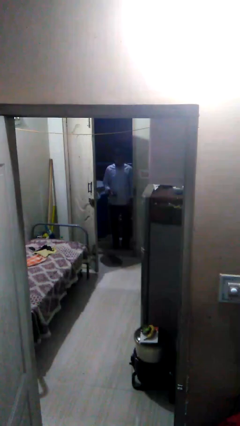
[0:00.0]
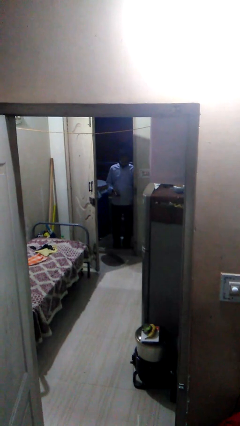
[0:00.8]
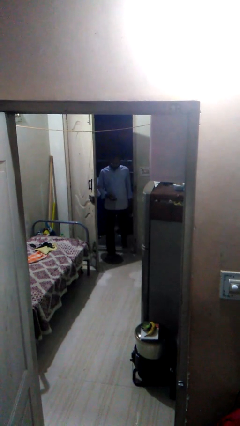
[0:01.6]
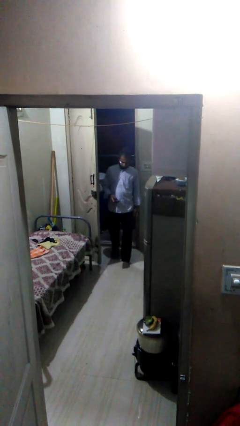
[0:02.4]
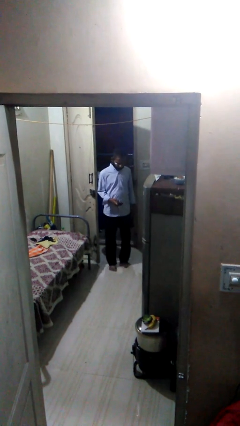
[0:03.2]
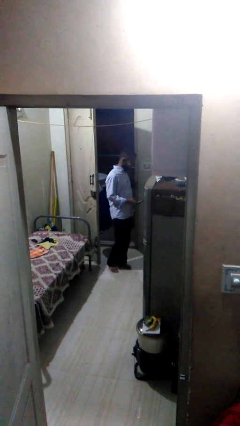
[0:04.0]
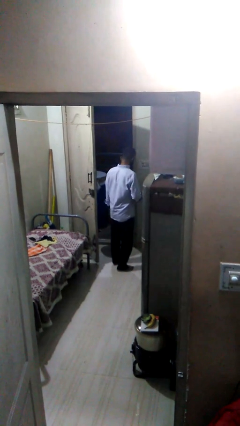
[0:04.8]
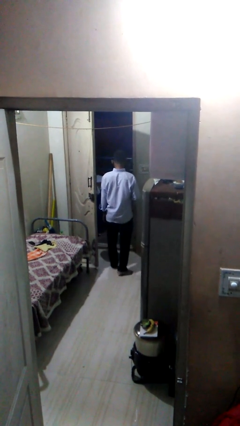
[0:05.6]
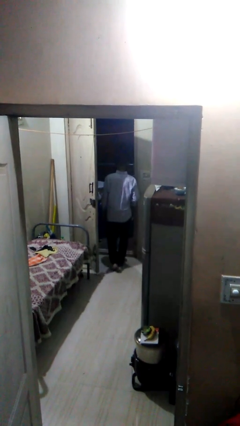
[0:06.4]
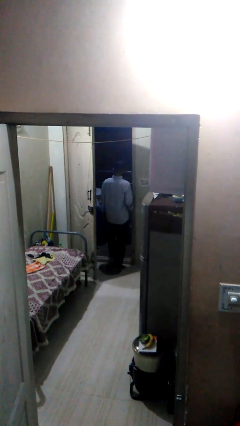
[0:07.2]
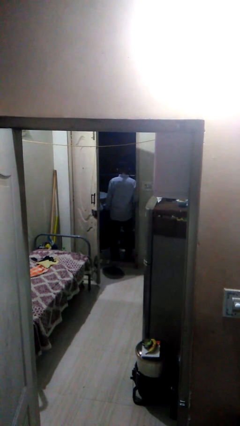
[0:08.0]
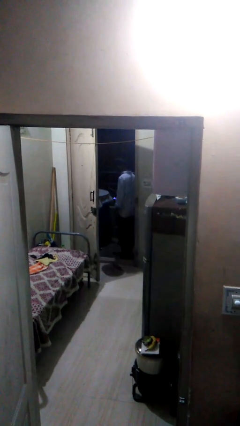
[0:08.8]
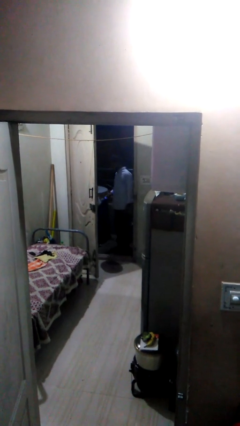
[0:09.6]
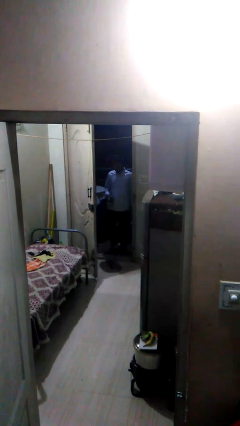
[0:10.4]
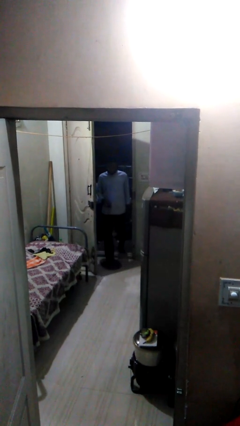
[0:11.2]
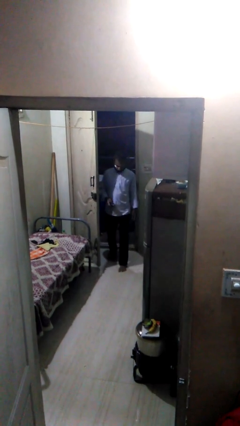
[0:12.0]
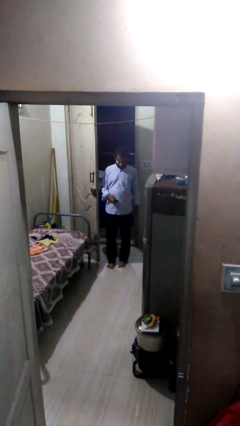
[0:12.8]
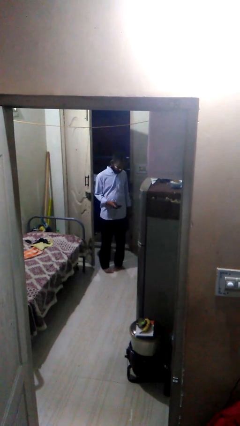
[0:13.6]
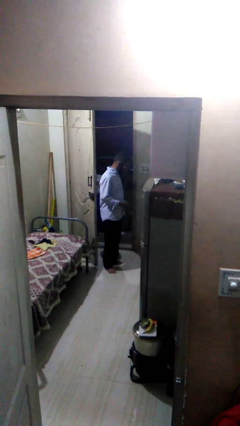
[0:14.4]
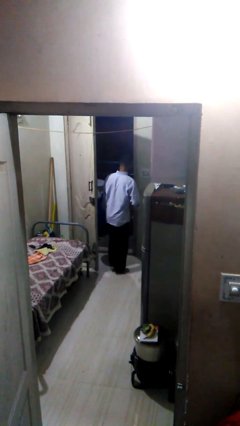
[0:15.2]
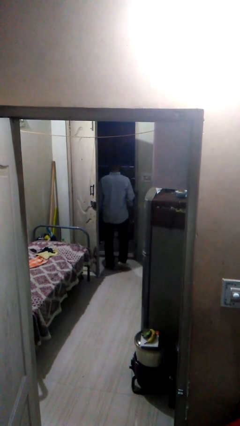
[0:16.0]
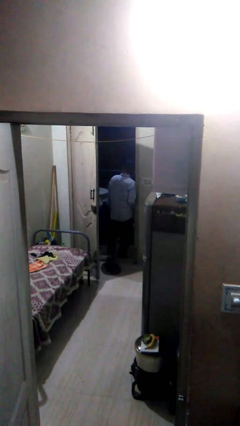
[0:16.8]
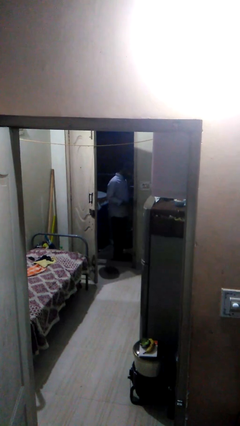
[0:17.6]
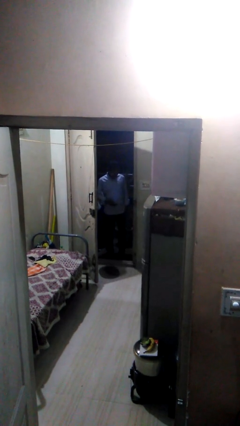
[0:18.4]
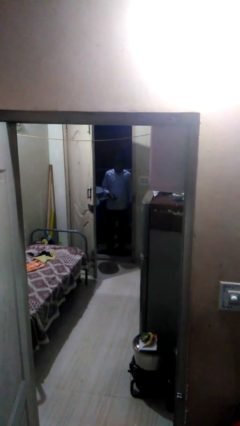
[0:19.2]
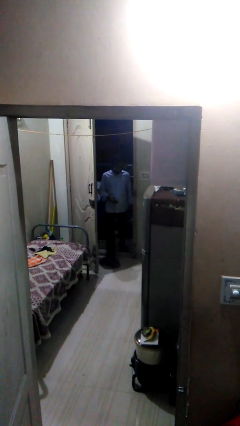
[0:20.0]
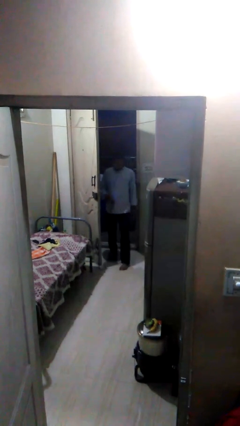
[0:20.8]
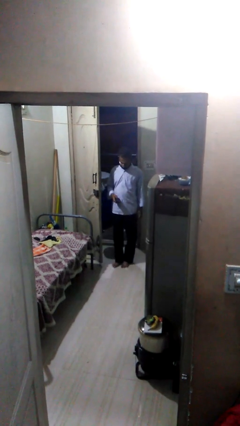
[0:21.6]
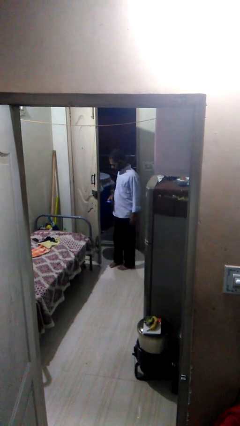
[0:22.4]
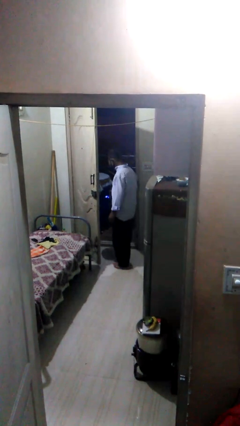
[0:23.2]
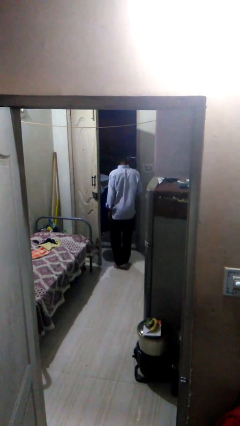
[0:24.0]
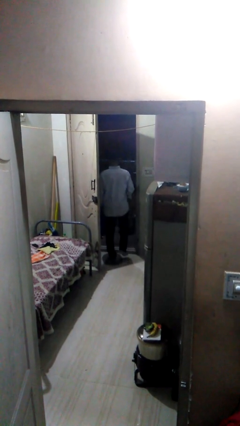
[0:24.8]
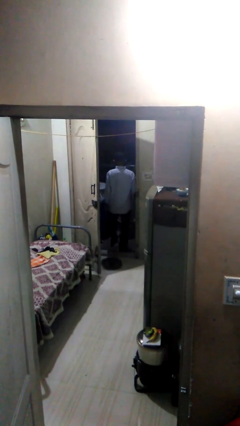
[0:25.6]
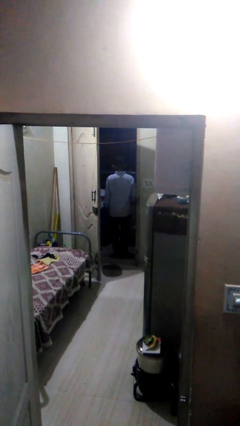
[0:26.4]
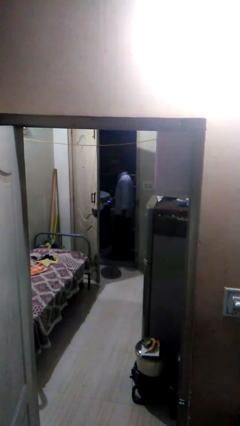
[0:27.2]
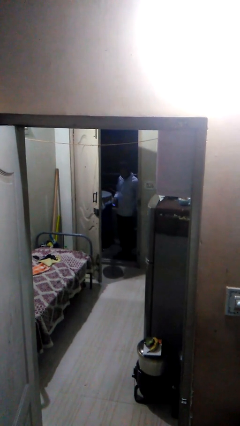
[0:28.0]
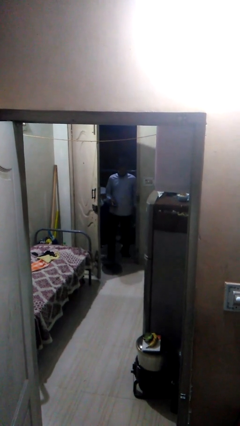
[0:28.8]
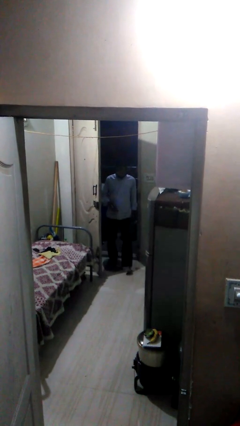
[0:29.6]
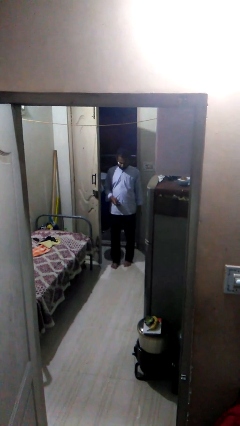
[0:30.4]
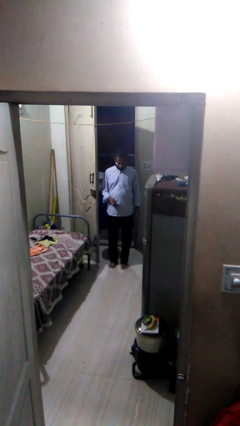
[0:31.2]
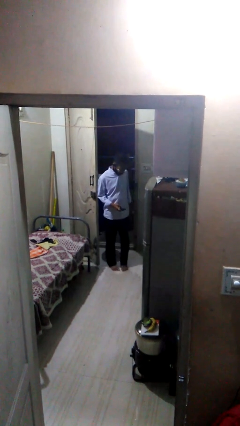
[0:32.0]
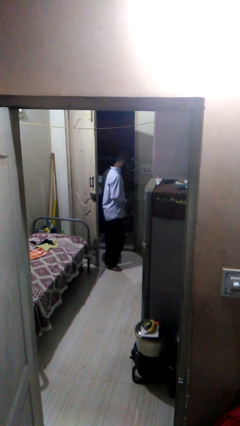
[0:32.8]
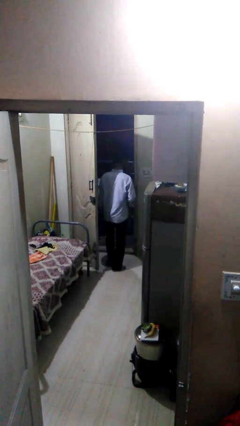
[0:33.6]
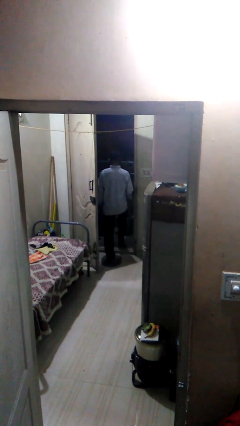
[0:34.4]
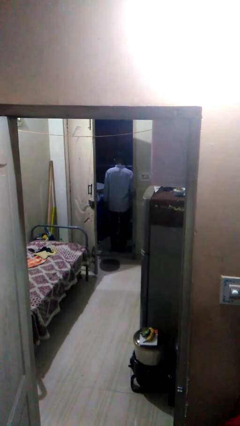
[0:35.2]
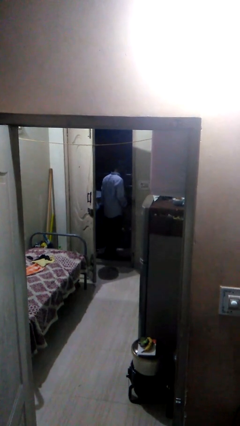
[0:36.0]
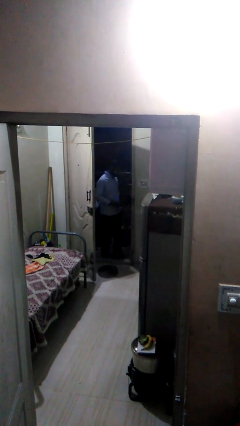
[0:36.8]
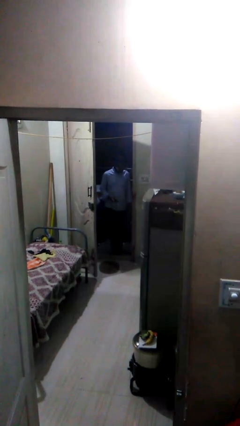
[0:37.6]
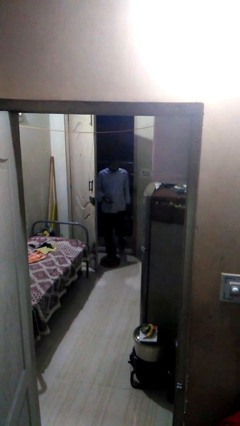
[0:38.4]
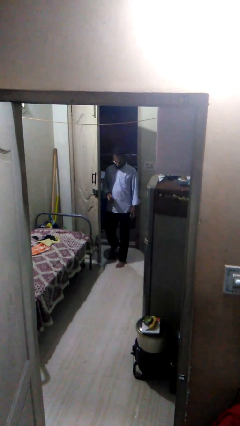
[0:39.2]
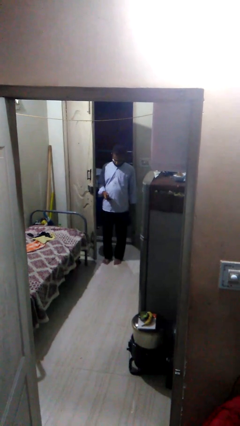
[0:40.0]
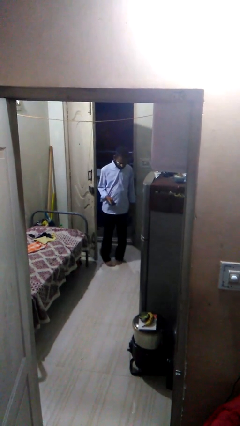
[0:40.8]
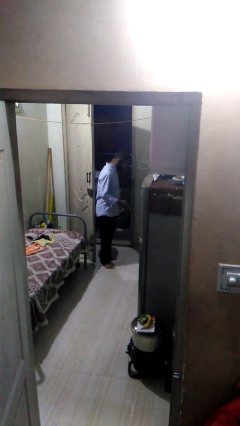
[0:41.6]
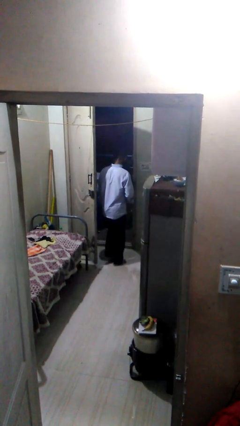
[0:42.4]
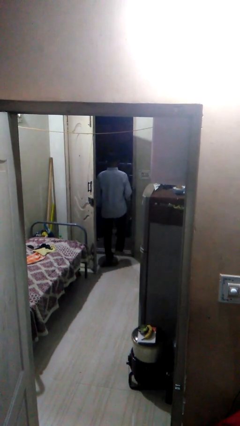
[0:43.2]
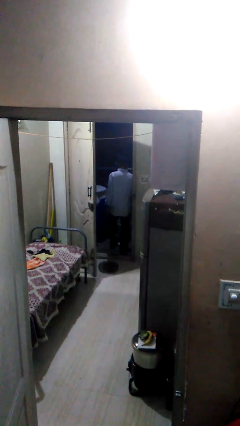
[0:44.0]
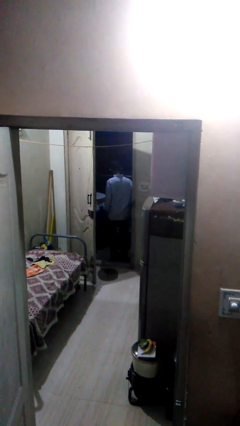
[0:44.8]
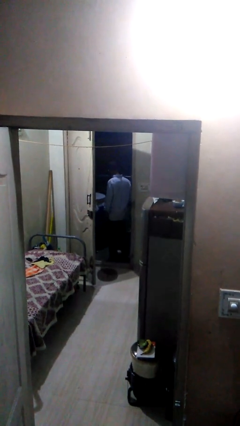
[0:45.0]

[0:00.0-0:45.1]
person texts on phone

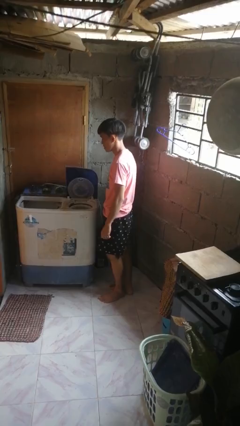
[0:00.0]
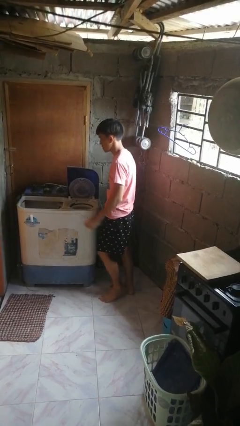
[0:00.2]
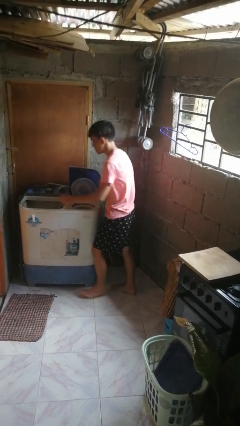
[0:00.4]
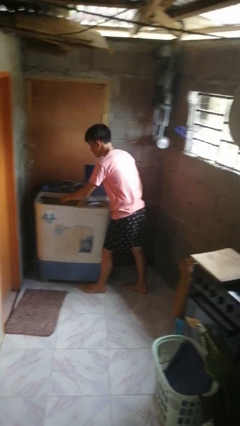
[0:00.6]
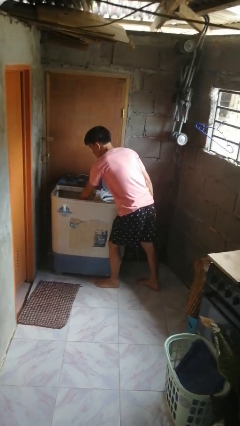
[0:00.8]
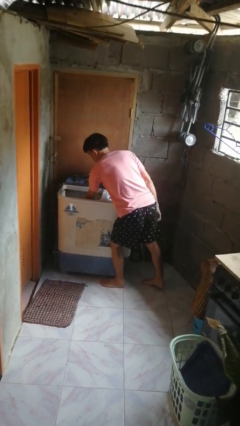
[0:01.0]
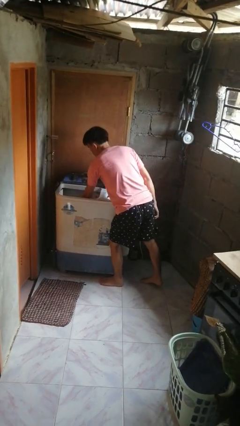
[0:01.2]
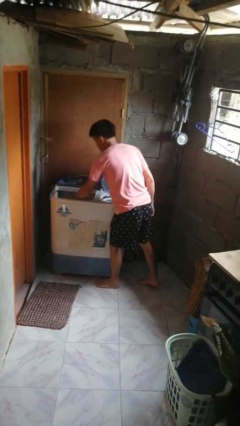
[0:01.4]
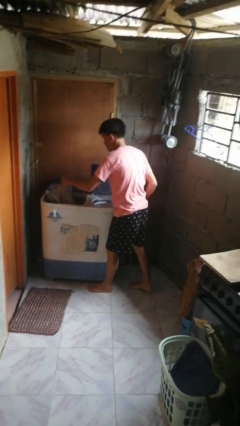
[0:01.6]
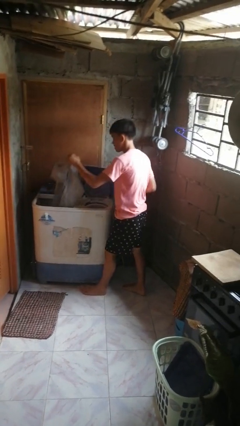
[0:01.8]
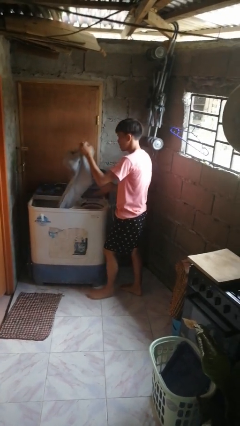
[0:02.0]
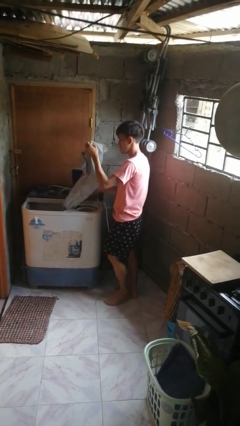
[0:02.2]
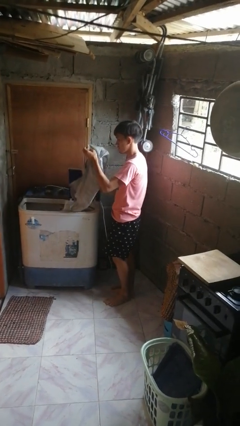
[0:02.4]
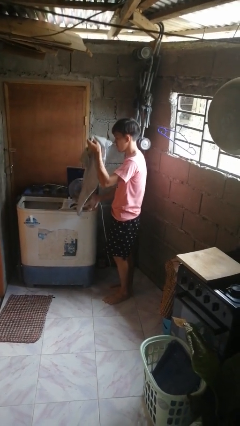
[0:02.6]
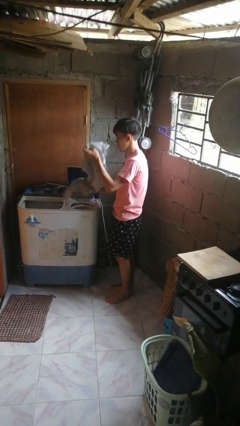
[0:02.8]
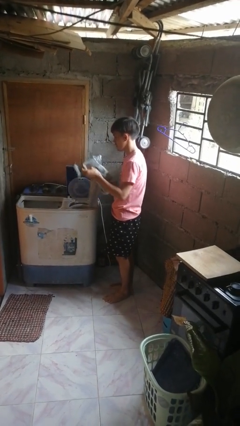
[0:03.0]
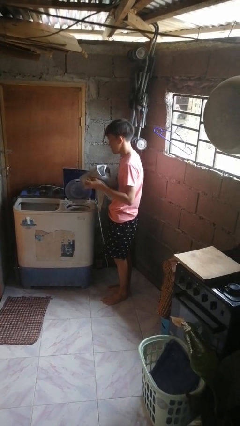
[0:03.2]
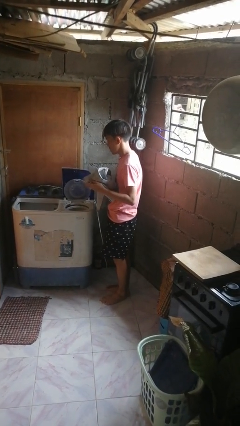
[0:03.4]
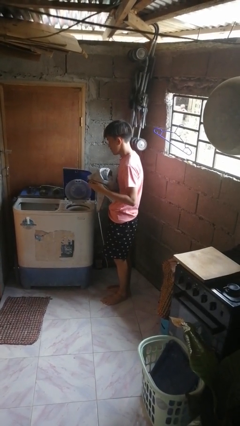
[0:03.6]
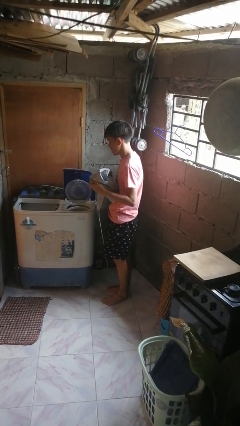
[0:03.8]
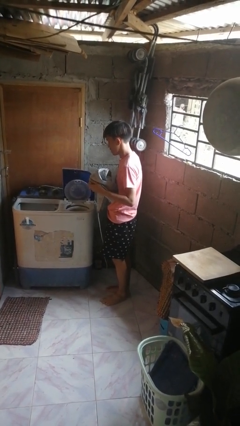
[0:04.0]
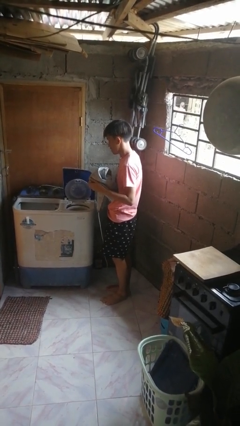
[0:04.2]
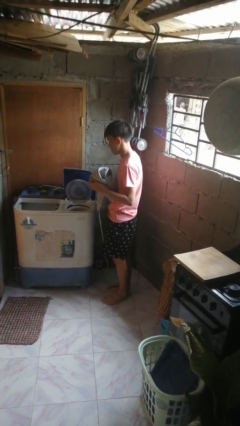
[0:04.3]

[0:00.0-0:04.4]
person unloads clotheswasher

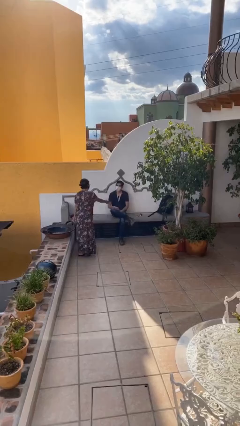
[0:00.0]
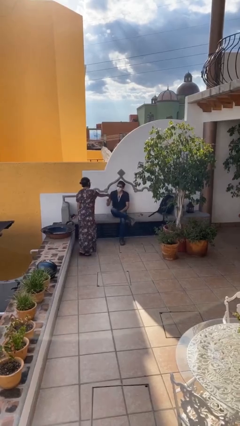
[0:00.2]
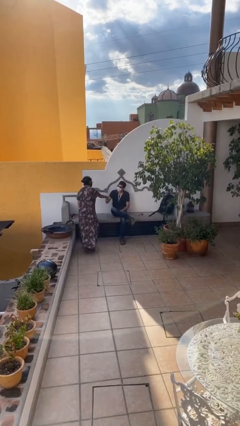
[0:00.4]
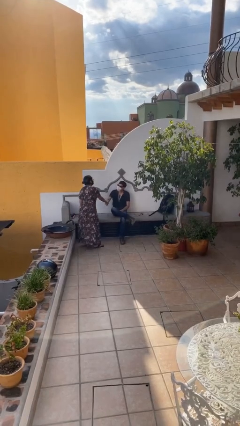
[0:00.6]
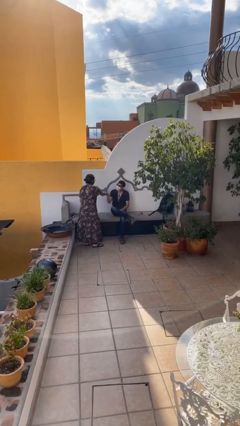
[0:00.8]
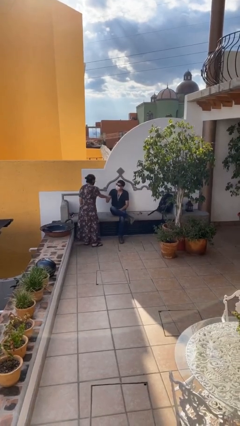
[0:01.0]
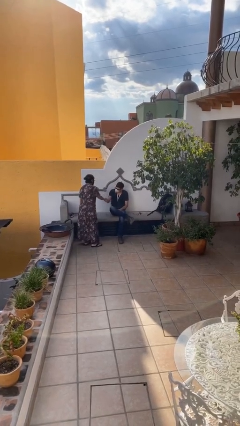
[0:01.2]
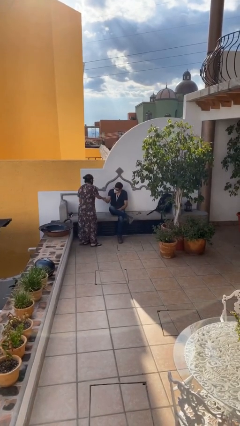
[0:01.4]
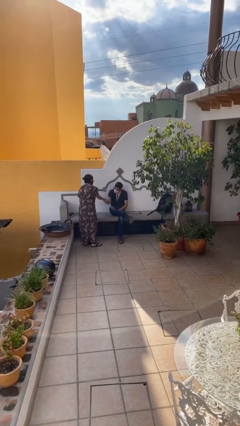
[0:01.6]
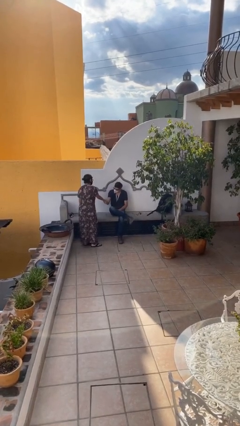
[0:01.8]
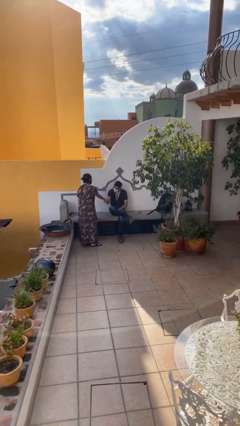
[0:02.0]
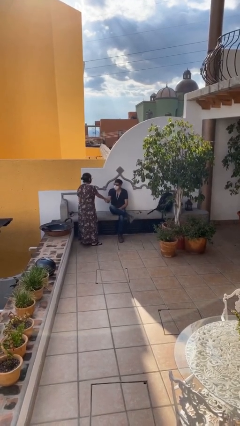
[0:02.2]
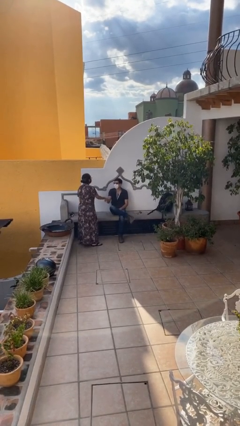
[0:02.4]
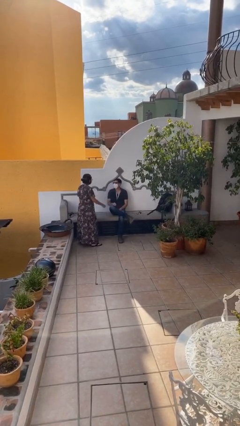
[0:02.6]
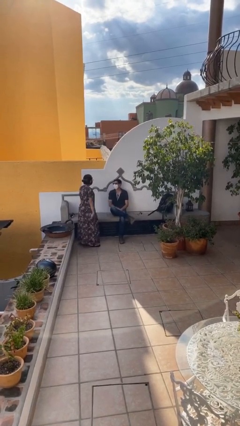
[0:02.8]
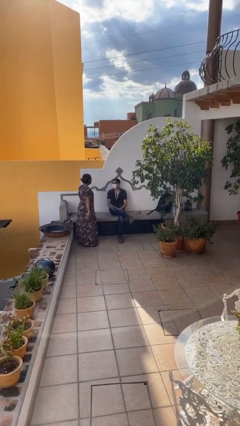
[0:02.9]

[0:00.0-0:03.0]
person shakes hand
